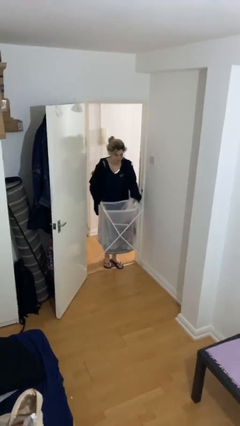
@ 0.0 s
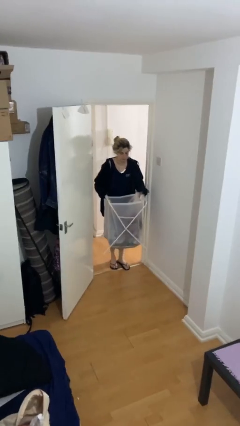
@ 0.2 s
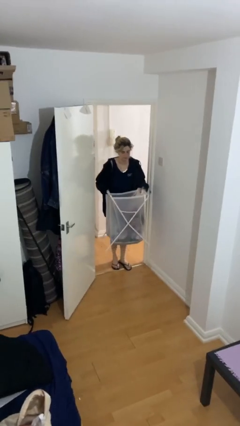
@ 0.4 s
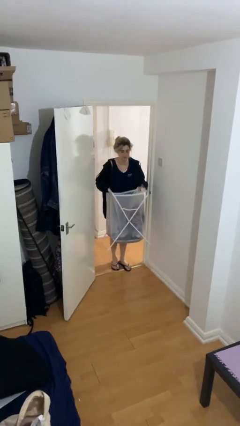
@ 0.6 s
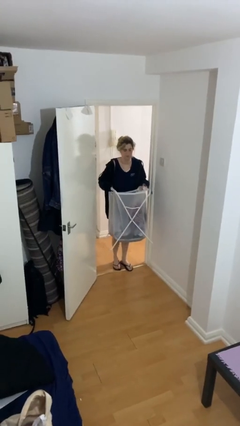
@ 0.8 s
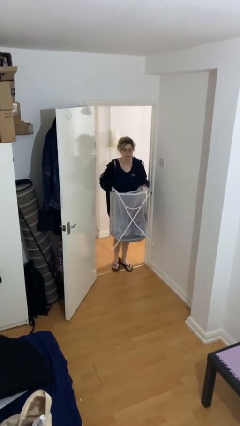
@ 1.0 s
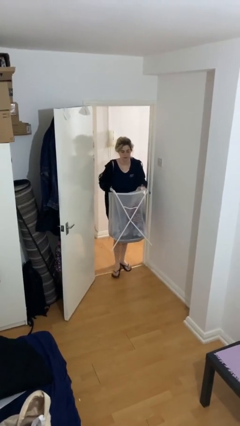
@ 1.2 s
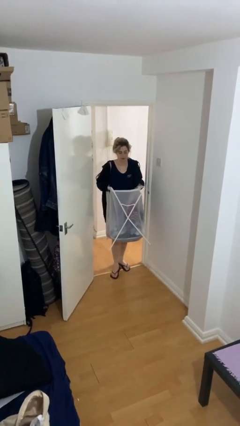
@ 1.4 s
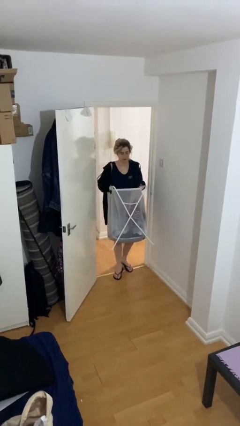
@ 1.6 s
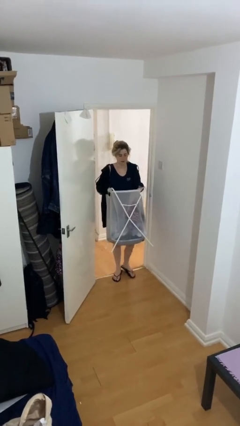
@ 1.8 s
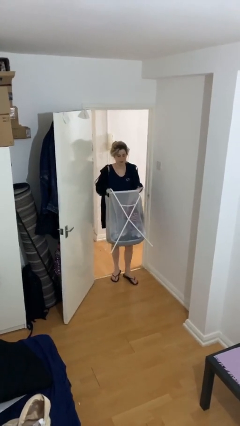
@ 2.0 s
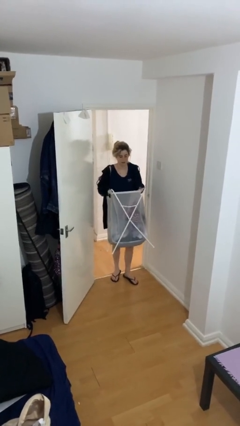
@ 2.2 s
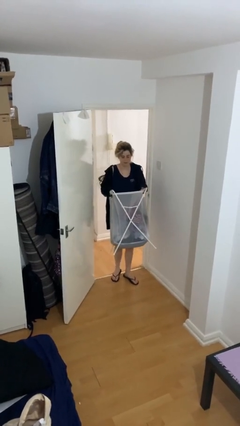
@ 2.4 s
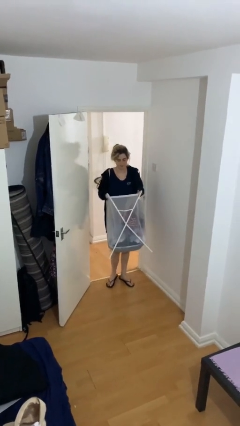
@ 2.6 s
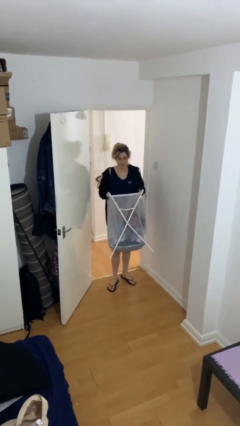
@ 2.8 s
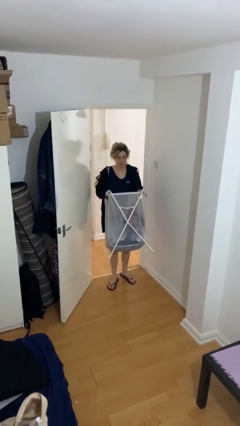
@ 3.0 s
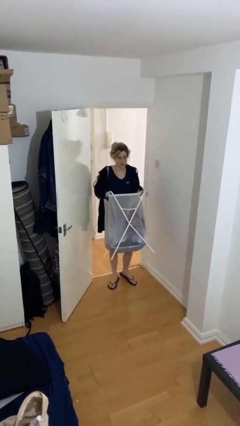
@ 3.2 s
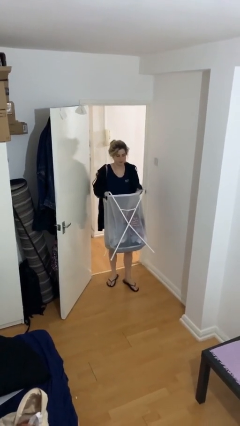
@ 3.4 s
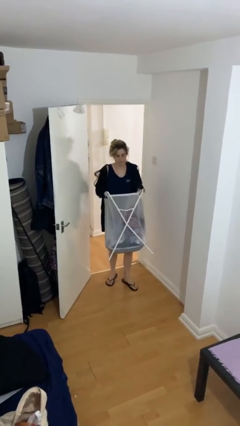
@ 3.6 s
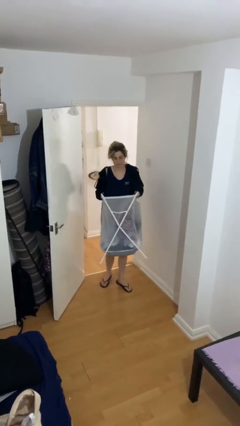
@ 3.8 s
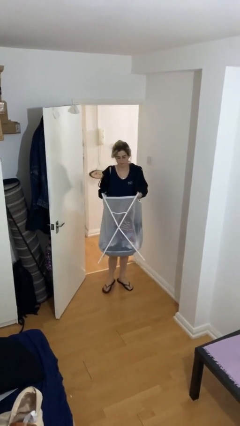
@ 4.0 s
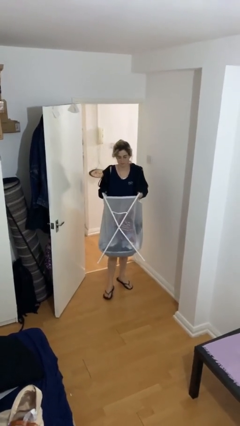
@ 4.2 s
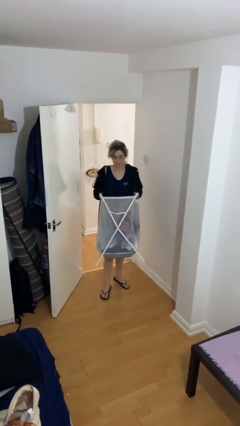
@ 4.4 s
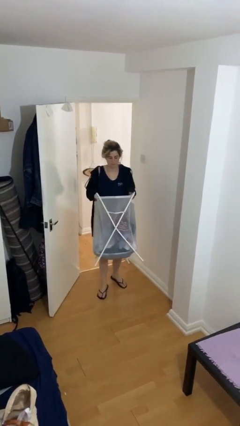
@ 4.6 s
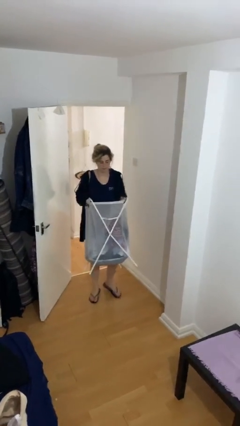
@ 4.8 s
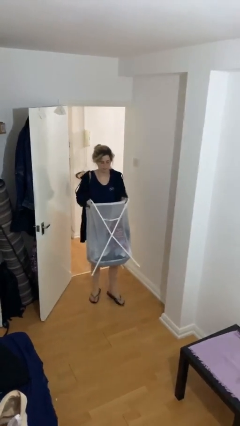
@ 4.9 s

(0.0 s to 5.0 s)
person carries heavy object

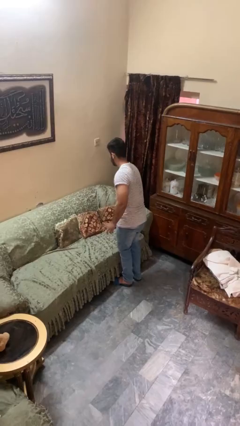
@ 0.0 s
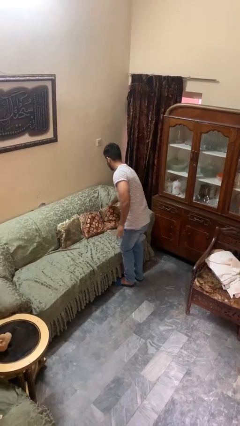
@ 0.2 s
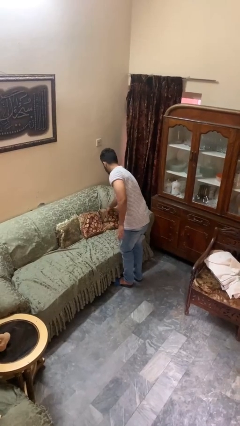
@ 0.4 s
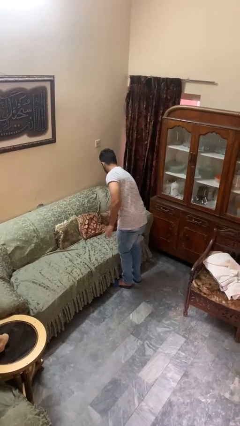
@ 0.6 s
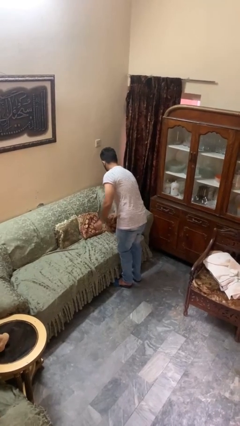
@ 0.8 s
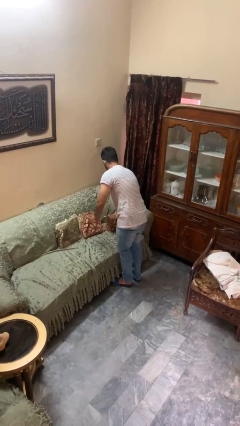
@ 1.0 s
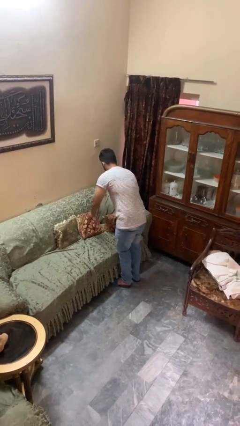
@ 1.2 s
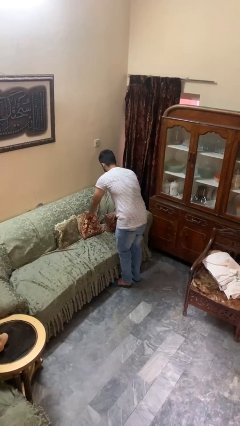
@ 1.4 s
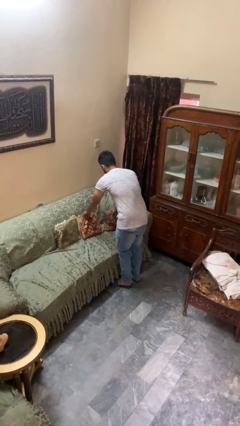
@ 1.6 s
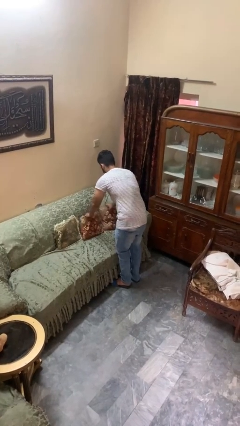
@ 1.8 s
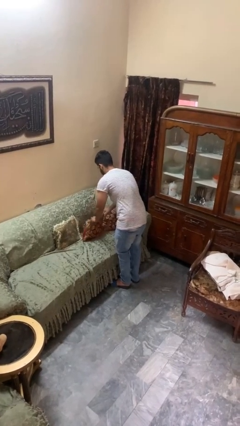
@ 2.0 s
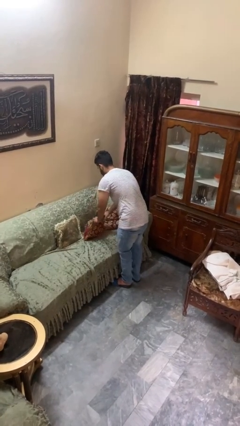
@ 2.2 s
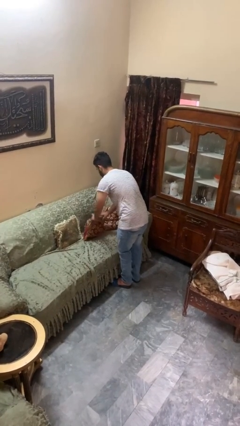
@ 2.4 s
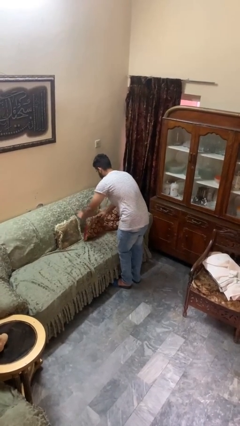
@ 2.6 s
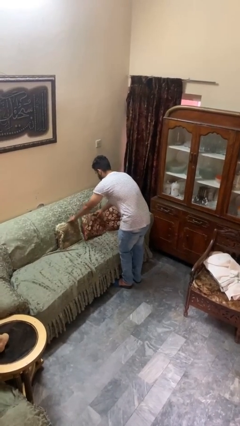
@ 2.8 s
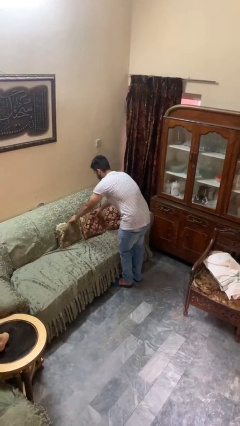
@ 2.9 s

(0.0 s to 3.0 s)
person searches in couch

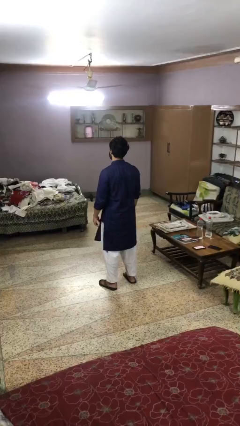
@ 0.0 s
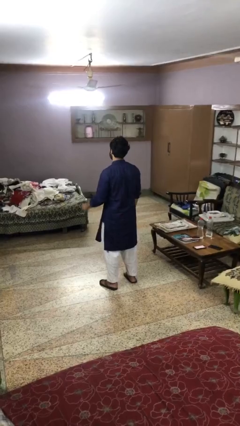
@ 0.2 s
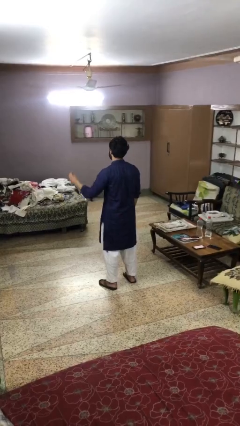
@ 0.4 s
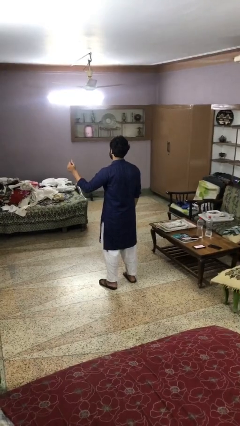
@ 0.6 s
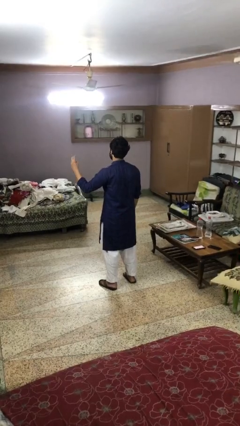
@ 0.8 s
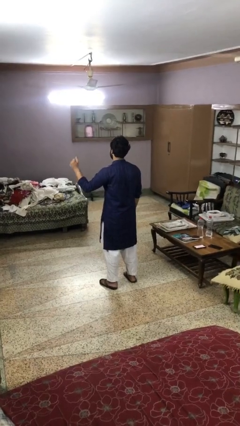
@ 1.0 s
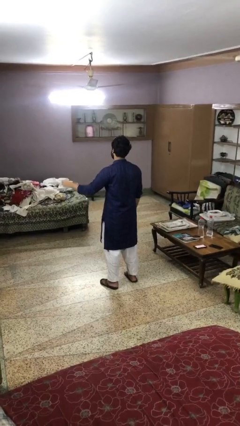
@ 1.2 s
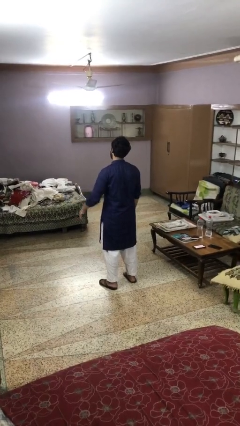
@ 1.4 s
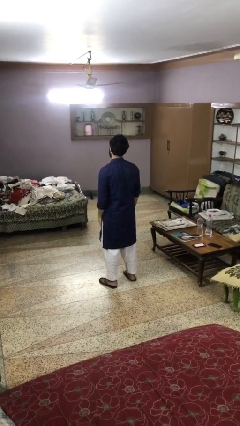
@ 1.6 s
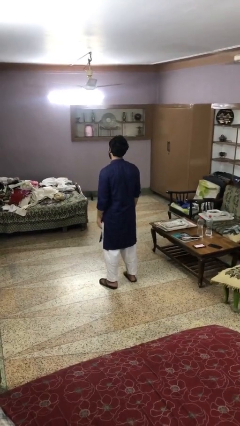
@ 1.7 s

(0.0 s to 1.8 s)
person snaps fingers

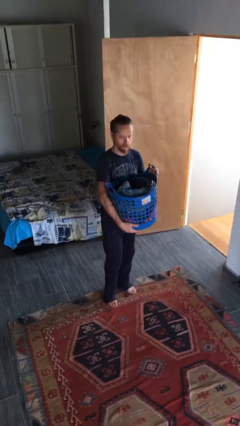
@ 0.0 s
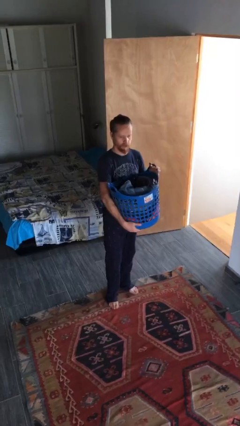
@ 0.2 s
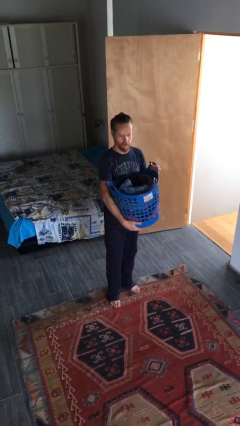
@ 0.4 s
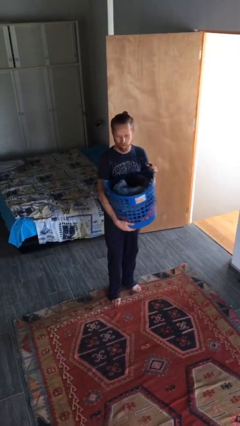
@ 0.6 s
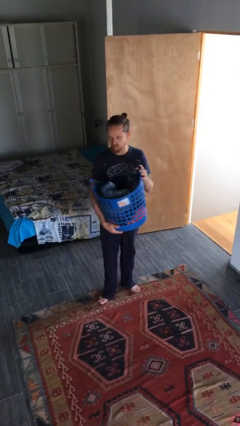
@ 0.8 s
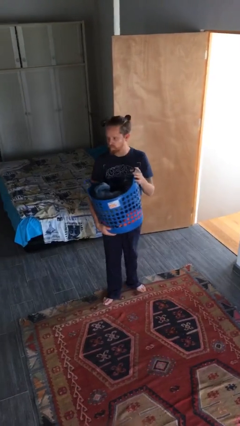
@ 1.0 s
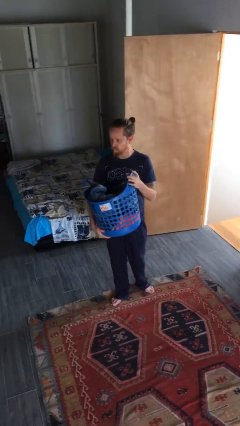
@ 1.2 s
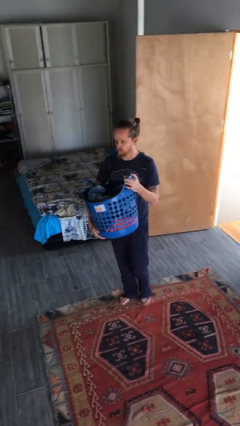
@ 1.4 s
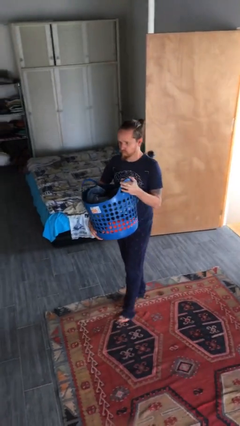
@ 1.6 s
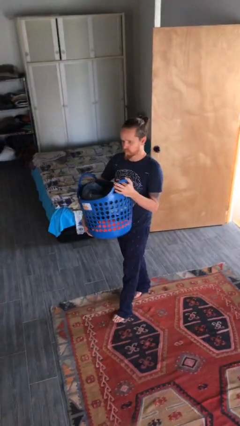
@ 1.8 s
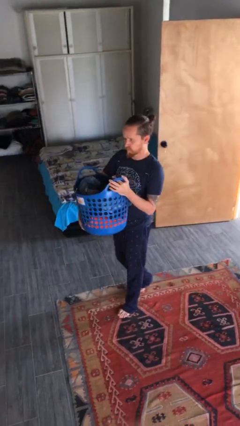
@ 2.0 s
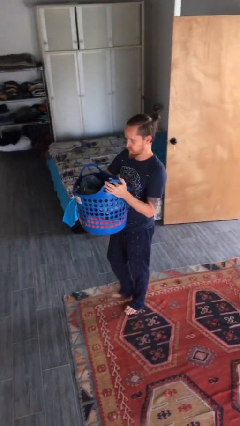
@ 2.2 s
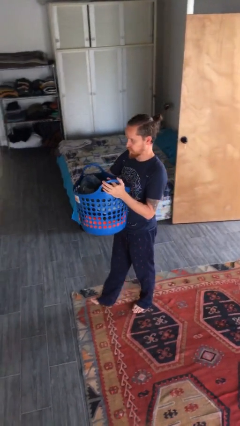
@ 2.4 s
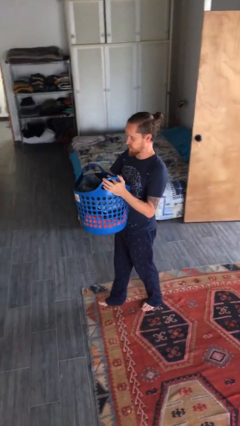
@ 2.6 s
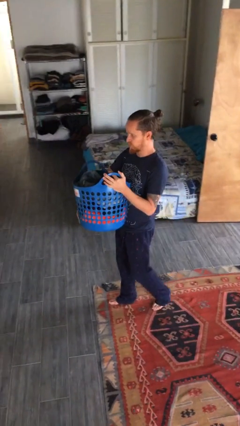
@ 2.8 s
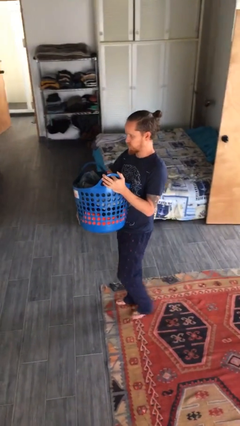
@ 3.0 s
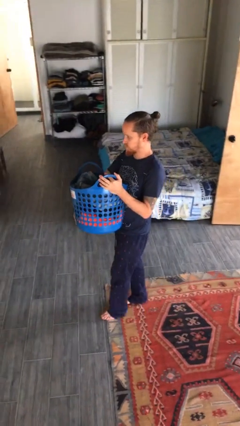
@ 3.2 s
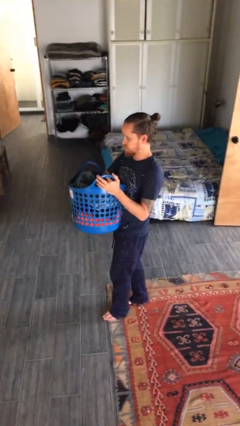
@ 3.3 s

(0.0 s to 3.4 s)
person carries laundry basket

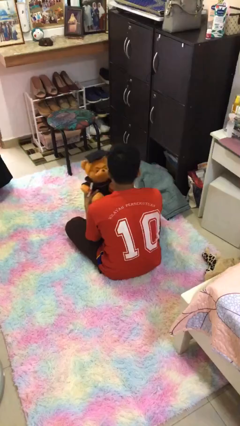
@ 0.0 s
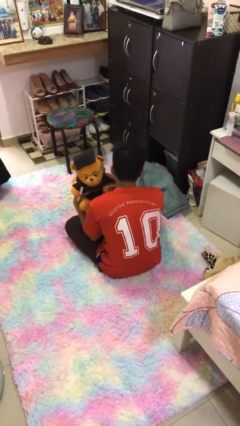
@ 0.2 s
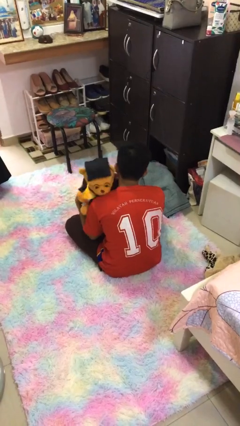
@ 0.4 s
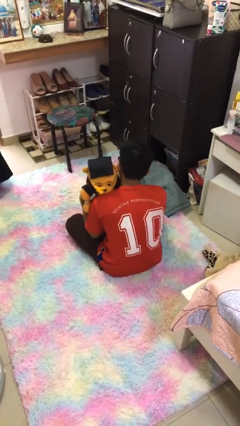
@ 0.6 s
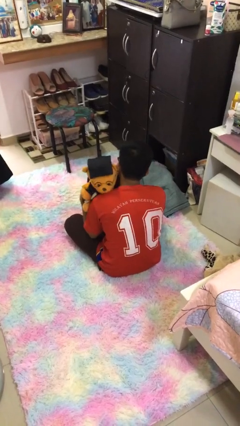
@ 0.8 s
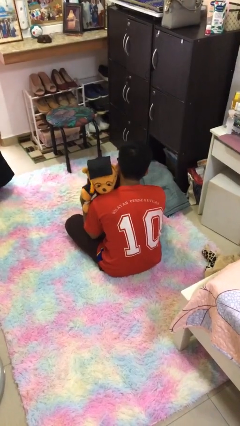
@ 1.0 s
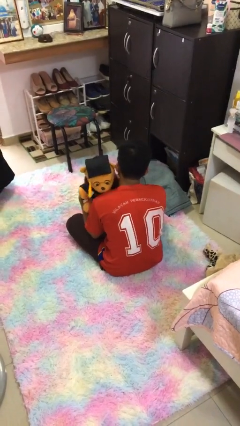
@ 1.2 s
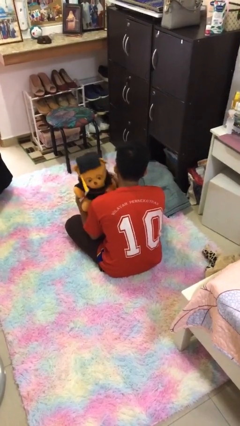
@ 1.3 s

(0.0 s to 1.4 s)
person hugs stuffed animal

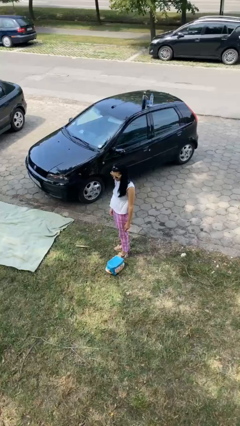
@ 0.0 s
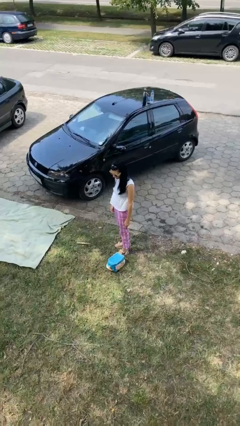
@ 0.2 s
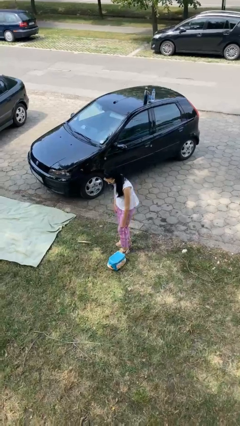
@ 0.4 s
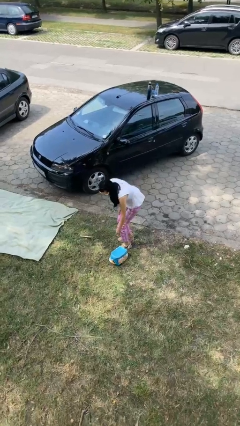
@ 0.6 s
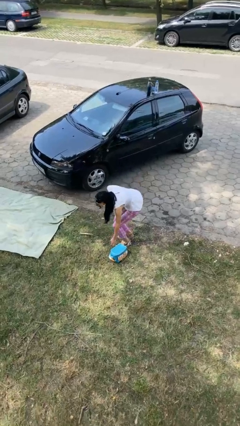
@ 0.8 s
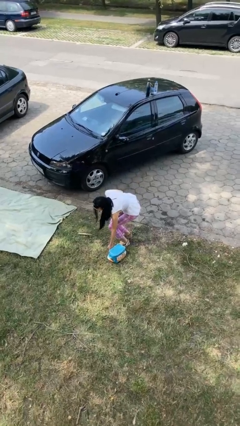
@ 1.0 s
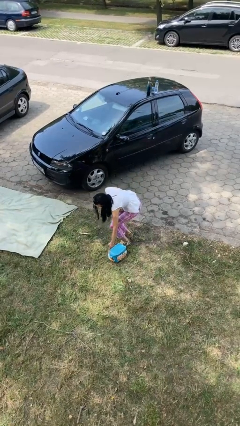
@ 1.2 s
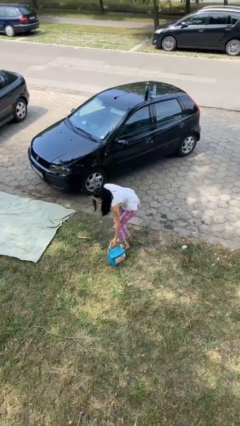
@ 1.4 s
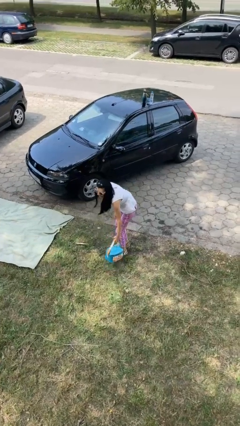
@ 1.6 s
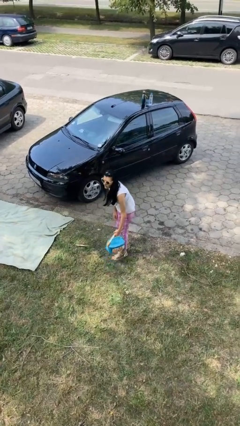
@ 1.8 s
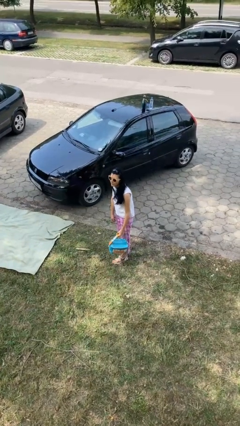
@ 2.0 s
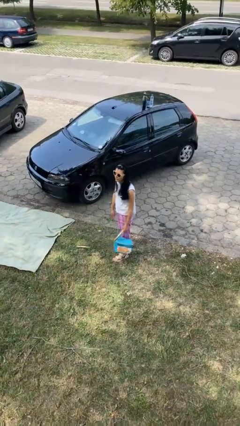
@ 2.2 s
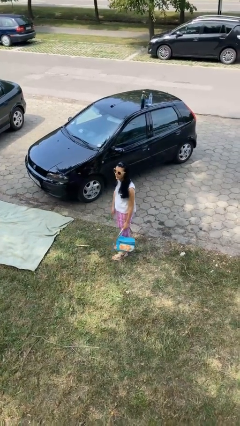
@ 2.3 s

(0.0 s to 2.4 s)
person picks up object from floor
